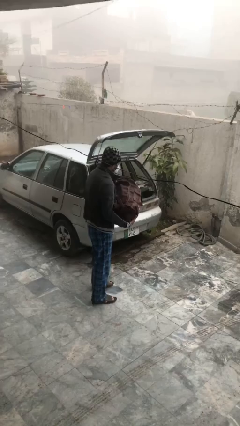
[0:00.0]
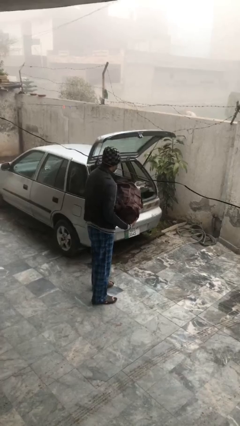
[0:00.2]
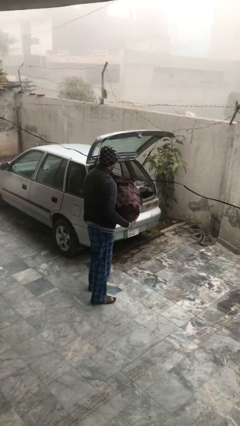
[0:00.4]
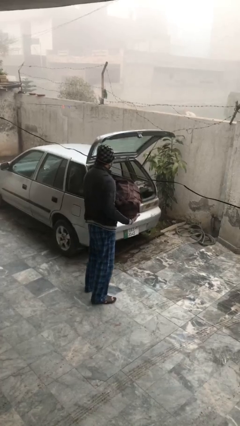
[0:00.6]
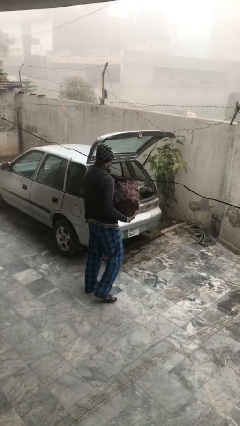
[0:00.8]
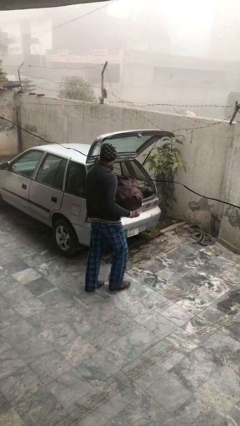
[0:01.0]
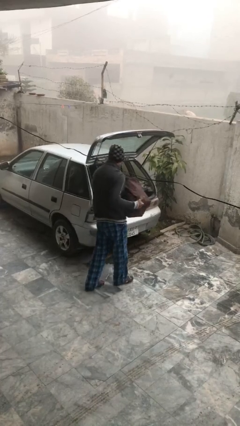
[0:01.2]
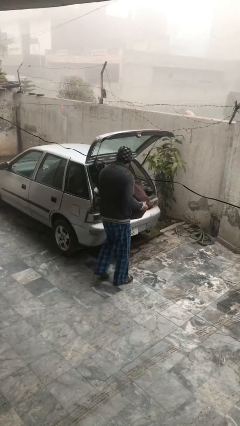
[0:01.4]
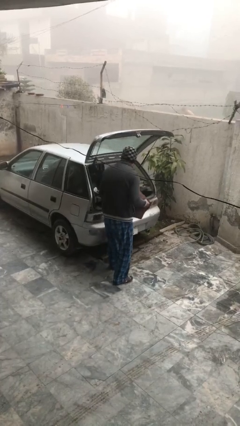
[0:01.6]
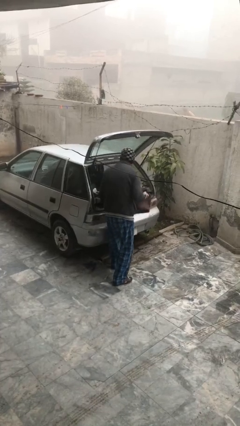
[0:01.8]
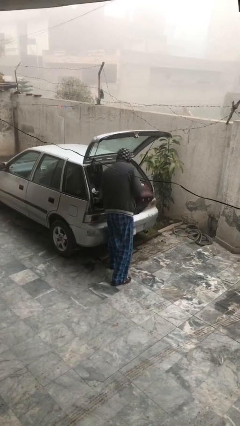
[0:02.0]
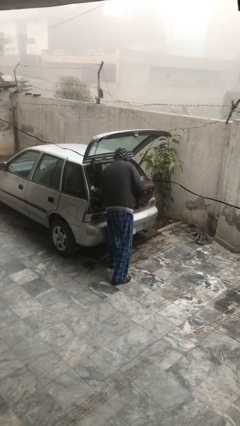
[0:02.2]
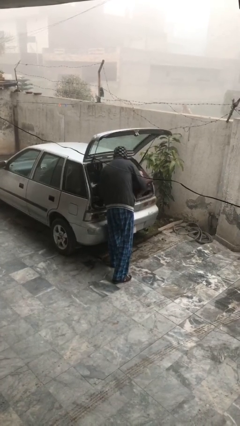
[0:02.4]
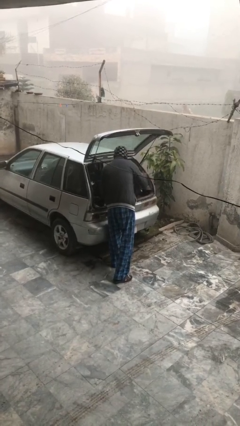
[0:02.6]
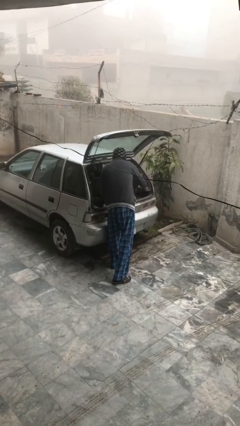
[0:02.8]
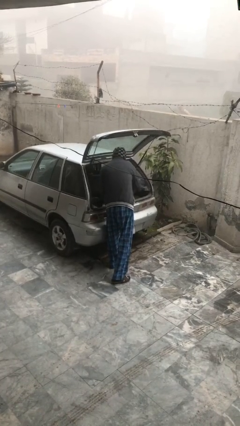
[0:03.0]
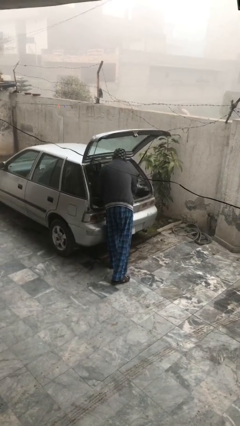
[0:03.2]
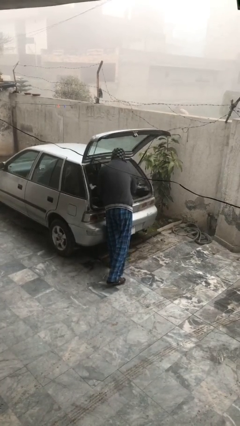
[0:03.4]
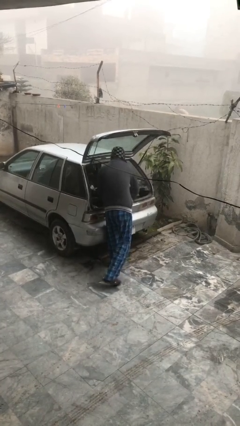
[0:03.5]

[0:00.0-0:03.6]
person loads car

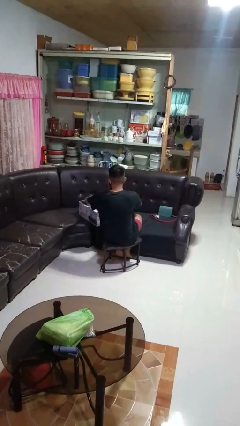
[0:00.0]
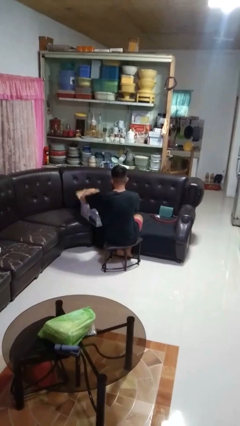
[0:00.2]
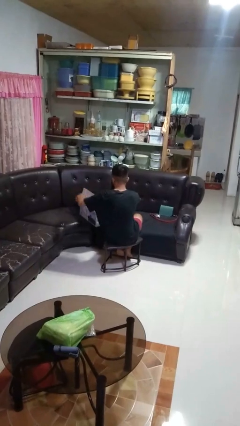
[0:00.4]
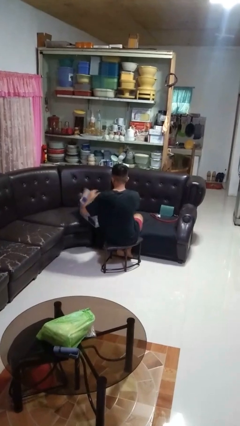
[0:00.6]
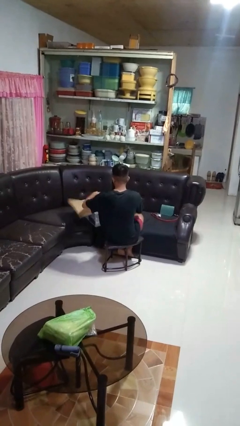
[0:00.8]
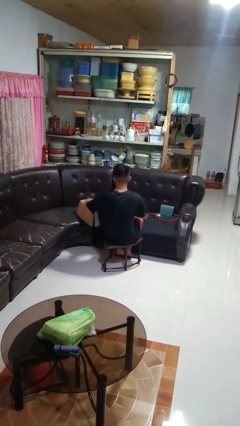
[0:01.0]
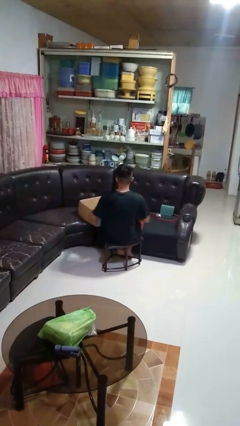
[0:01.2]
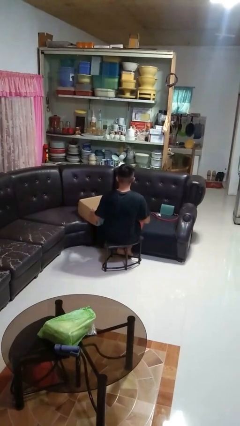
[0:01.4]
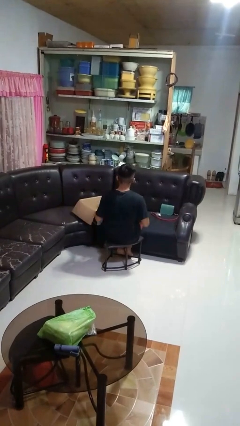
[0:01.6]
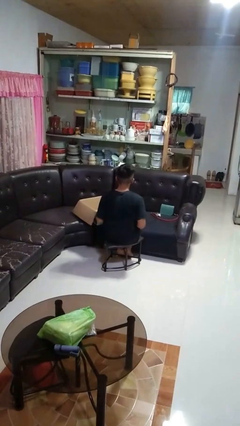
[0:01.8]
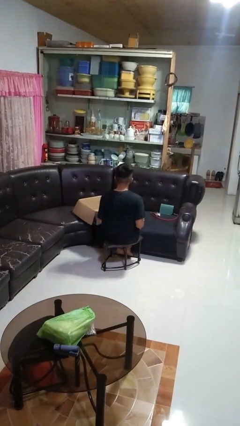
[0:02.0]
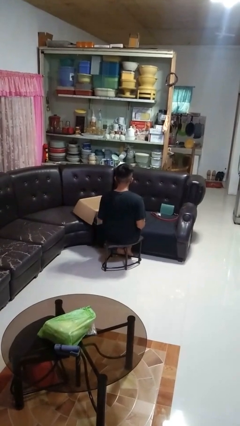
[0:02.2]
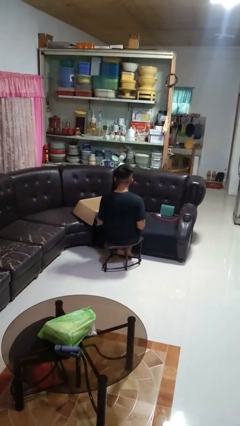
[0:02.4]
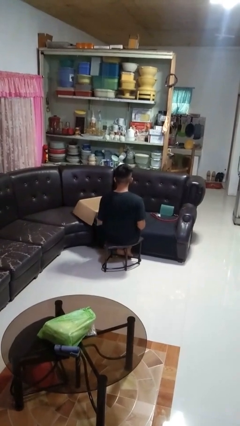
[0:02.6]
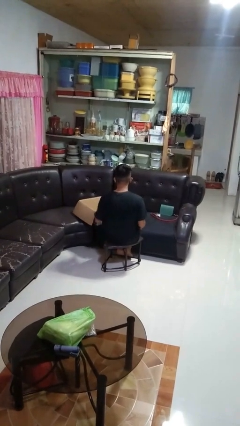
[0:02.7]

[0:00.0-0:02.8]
person opens box

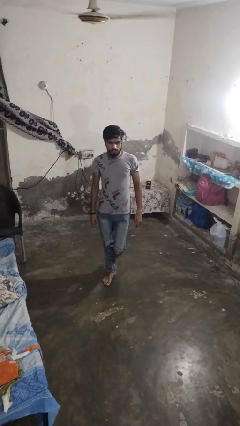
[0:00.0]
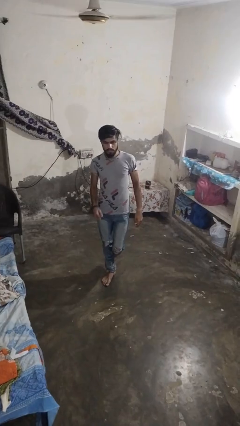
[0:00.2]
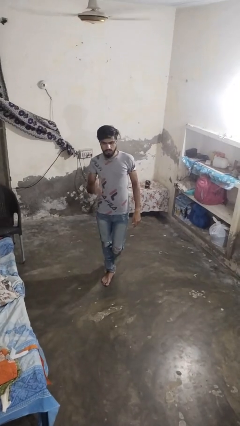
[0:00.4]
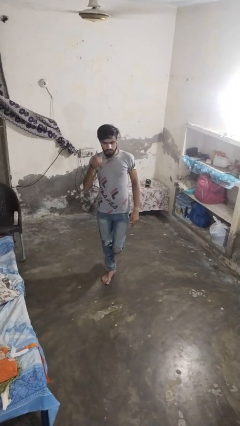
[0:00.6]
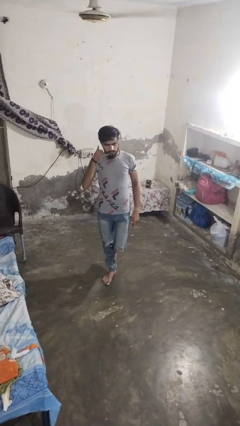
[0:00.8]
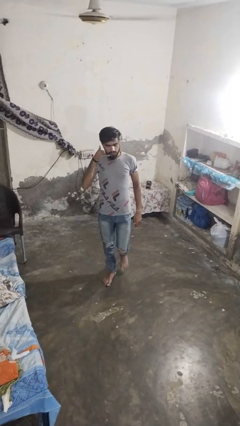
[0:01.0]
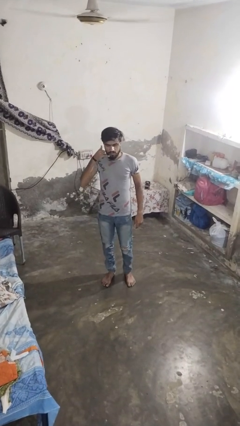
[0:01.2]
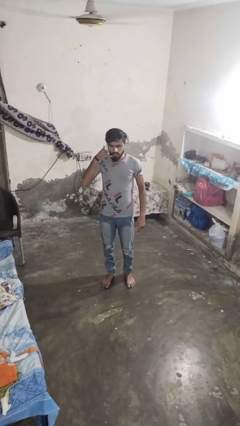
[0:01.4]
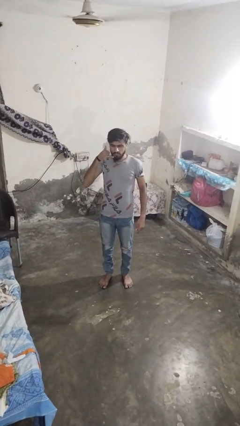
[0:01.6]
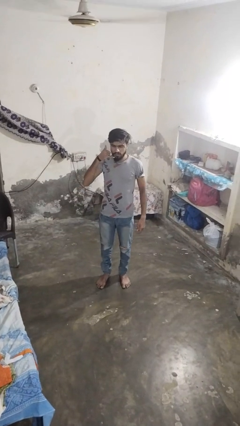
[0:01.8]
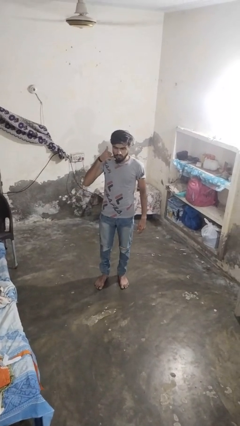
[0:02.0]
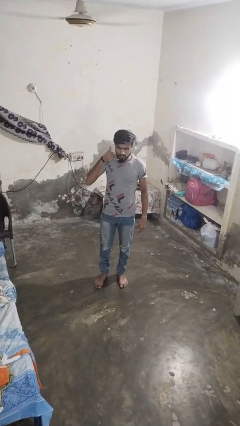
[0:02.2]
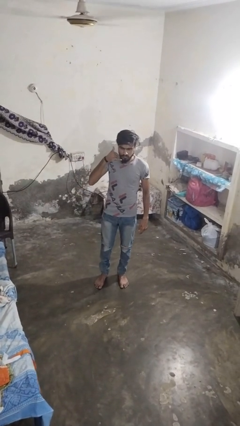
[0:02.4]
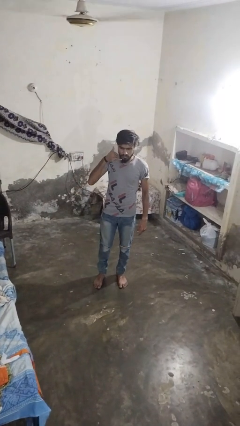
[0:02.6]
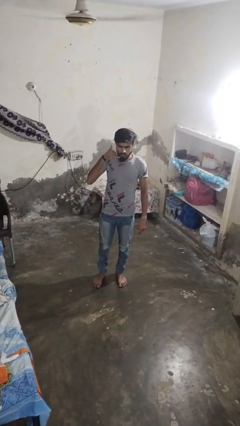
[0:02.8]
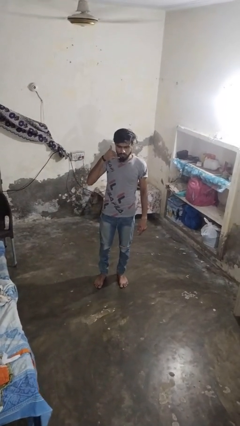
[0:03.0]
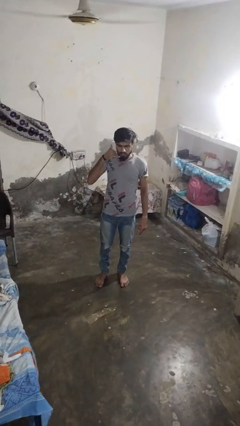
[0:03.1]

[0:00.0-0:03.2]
person gestures call me

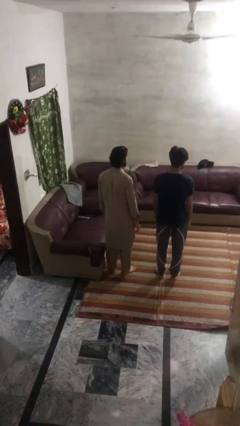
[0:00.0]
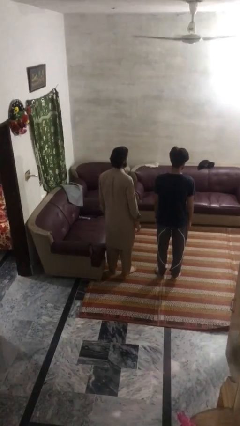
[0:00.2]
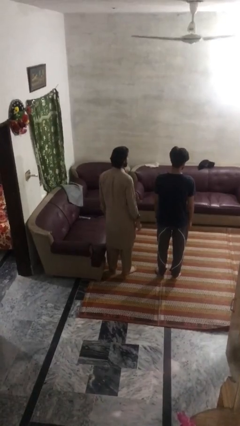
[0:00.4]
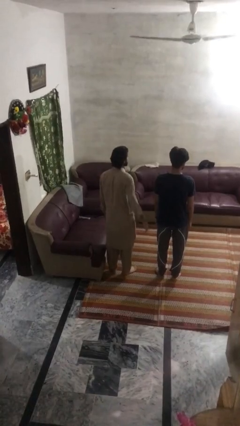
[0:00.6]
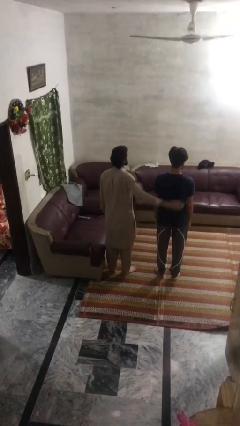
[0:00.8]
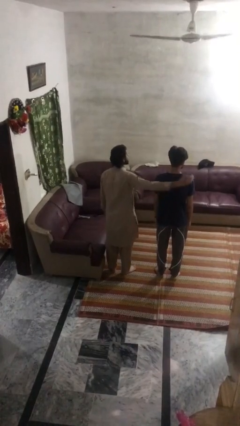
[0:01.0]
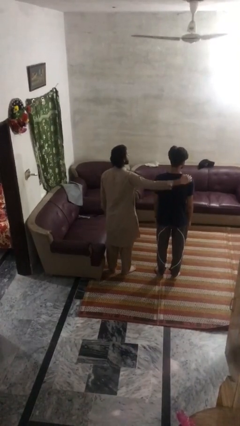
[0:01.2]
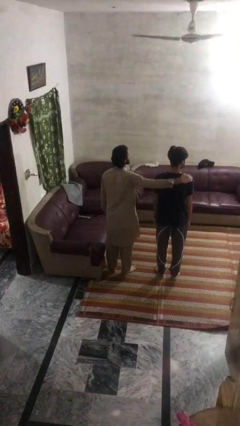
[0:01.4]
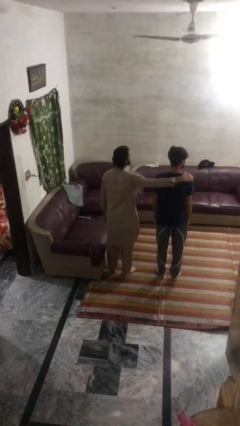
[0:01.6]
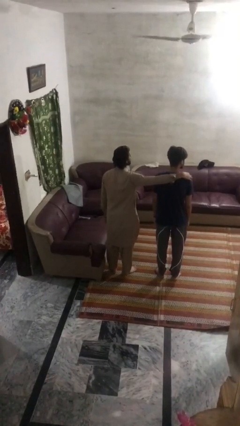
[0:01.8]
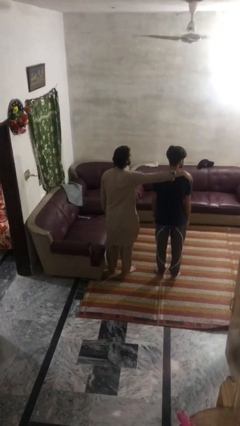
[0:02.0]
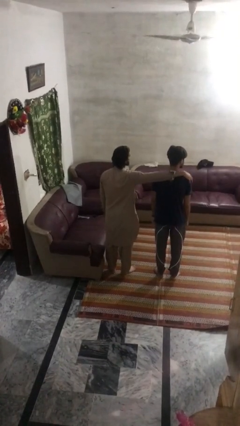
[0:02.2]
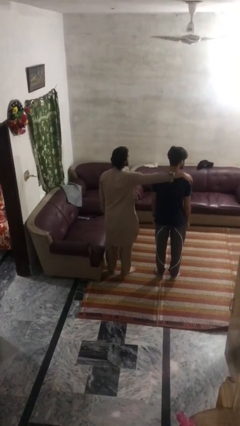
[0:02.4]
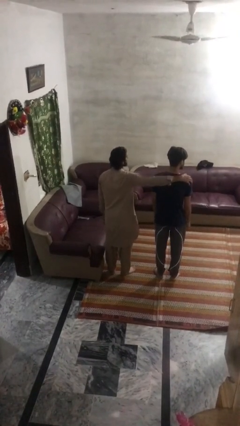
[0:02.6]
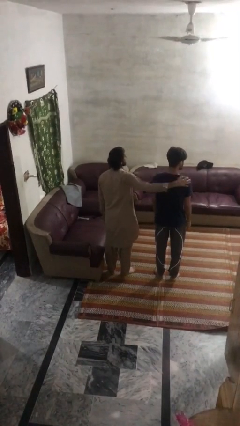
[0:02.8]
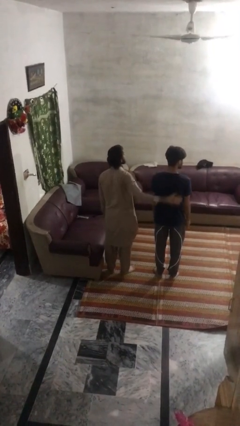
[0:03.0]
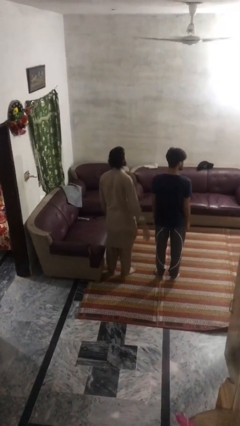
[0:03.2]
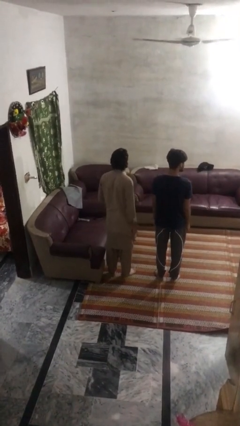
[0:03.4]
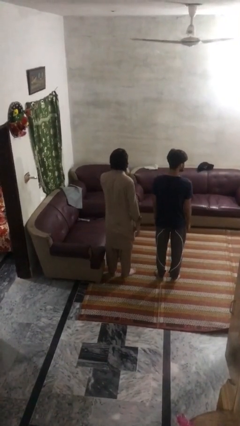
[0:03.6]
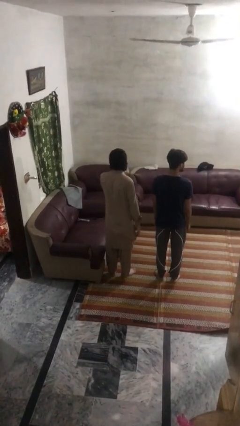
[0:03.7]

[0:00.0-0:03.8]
person pounds shoulders of person

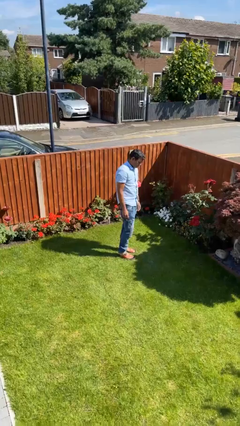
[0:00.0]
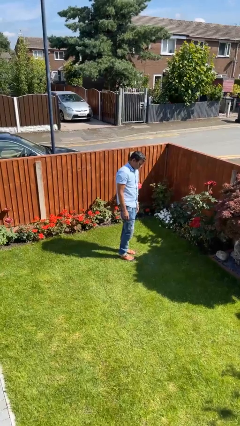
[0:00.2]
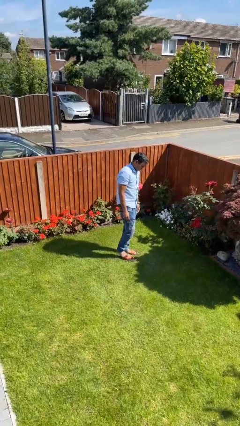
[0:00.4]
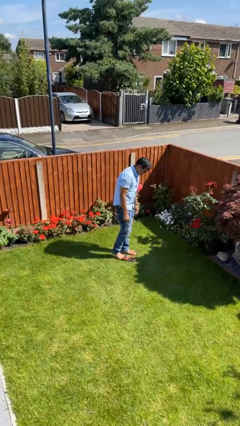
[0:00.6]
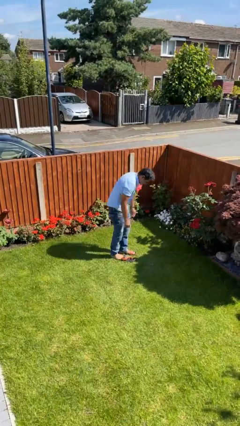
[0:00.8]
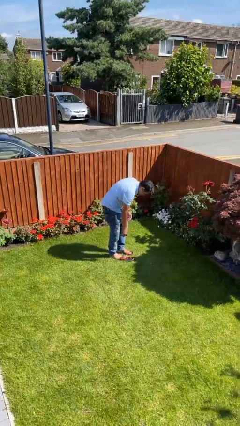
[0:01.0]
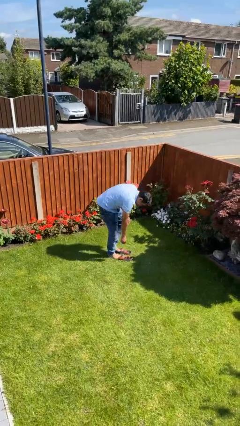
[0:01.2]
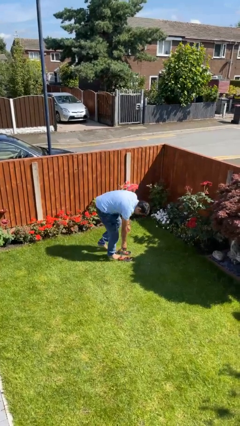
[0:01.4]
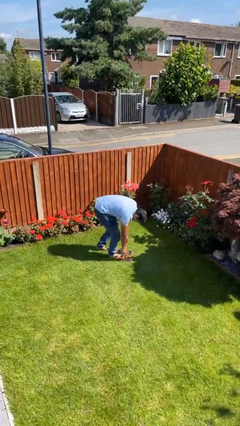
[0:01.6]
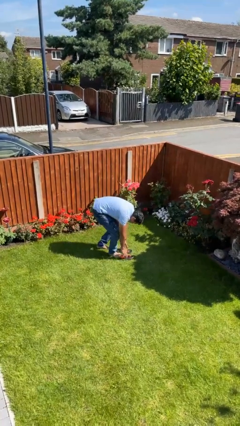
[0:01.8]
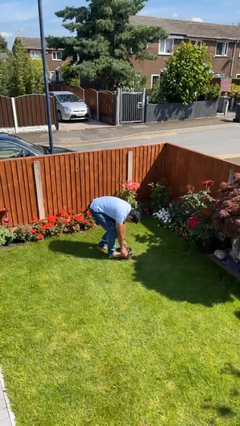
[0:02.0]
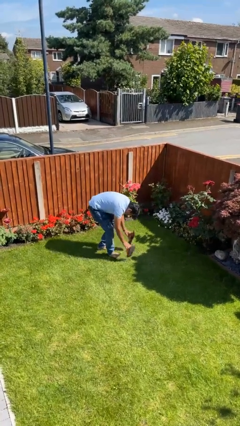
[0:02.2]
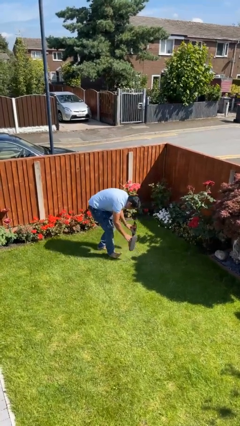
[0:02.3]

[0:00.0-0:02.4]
person takes off shoes

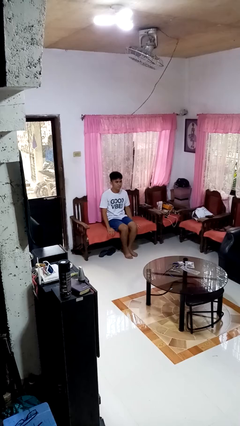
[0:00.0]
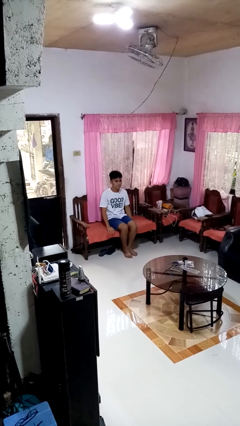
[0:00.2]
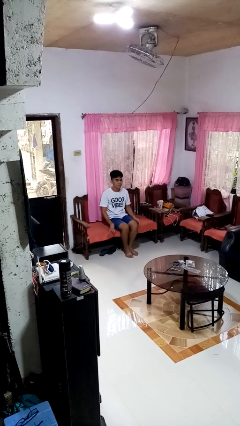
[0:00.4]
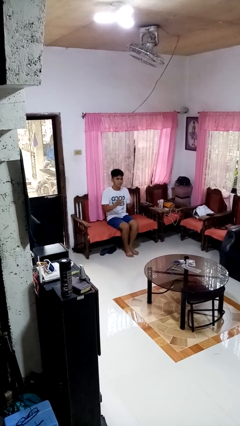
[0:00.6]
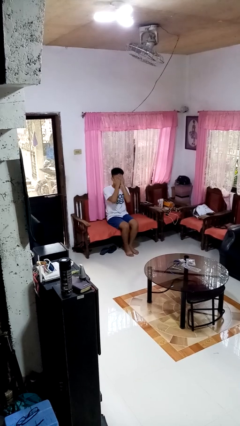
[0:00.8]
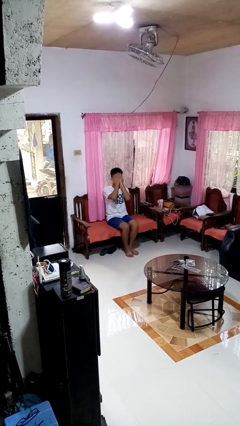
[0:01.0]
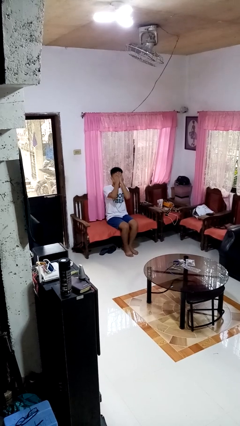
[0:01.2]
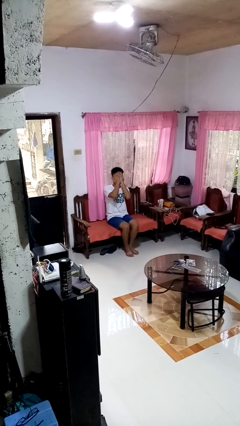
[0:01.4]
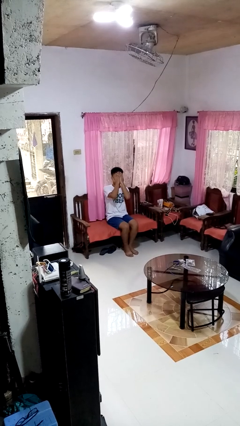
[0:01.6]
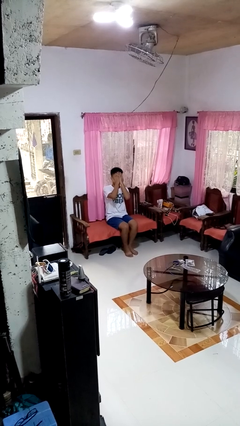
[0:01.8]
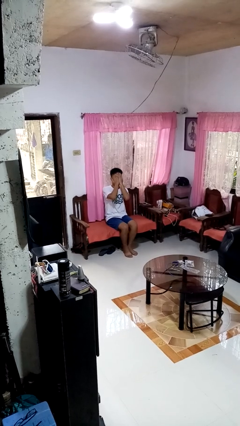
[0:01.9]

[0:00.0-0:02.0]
person covers face with hands
